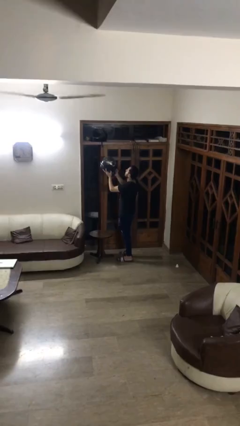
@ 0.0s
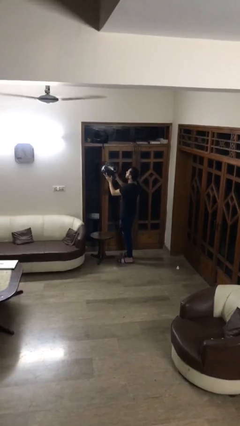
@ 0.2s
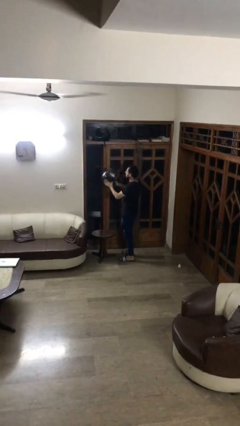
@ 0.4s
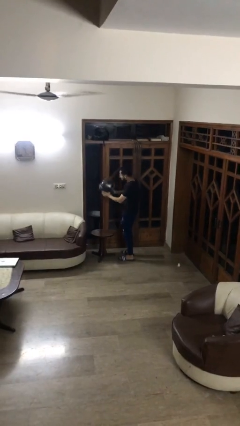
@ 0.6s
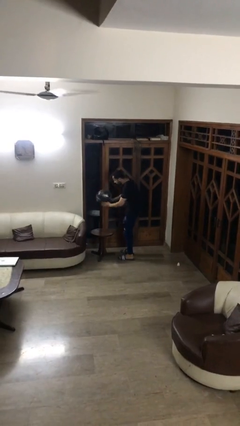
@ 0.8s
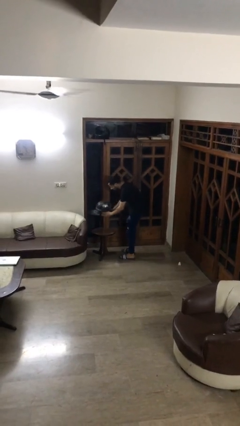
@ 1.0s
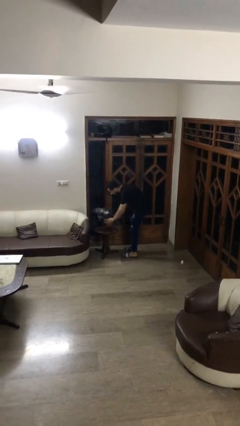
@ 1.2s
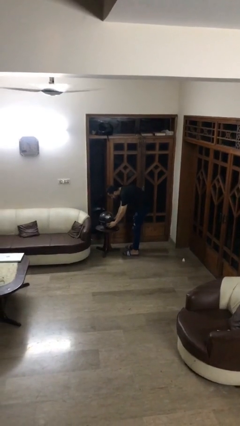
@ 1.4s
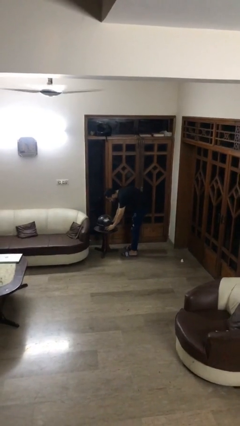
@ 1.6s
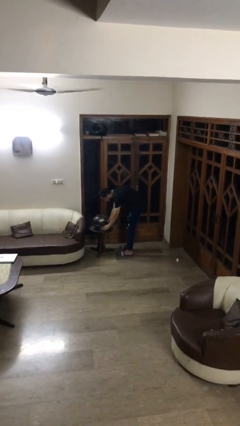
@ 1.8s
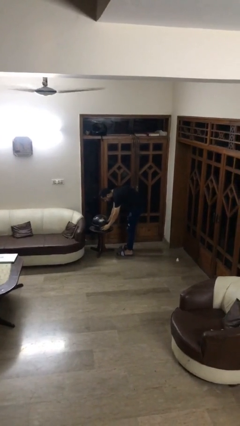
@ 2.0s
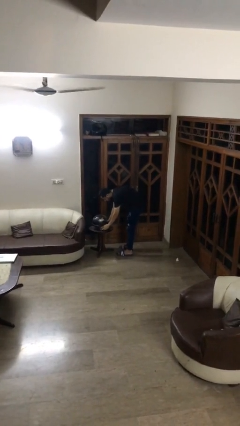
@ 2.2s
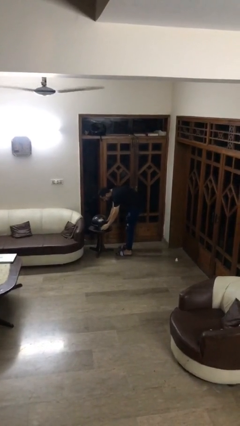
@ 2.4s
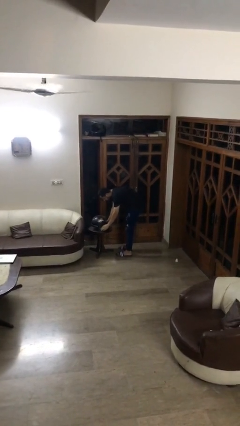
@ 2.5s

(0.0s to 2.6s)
person puts down object on table

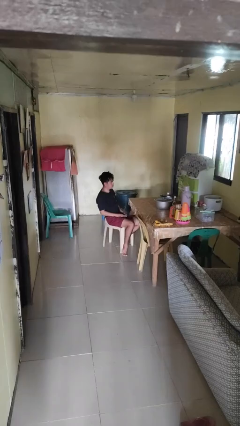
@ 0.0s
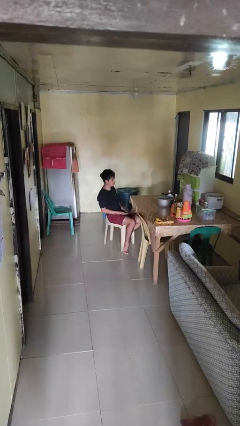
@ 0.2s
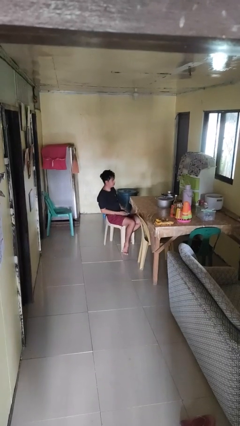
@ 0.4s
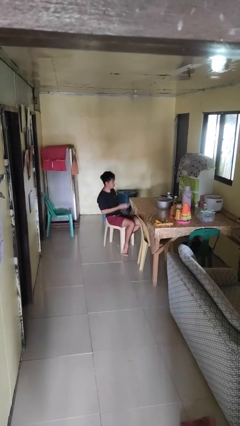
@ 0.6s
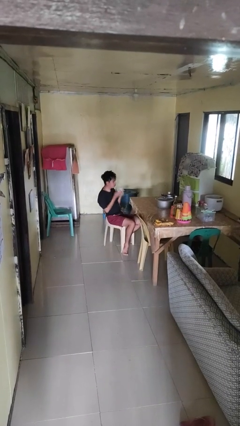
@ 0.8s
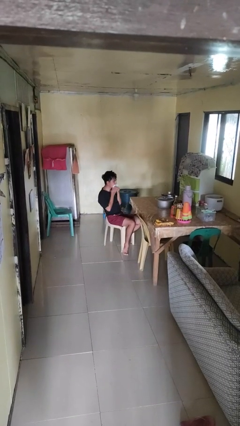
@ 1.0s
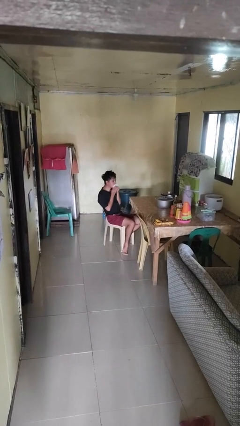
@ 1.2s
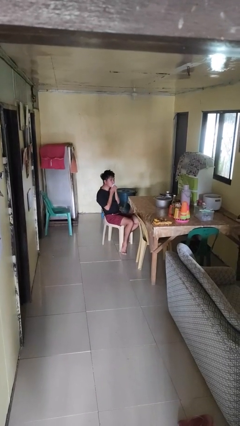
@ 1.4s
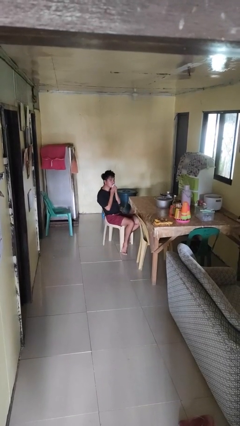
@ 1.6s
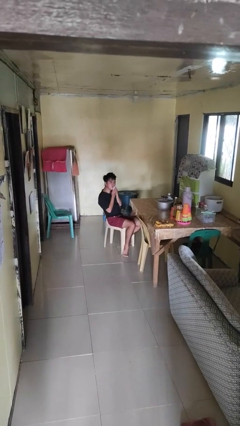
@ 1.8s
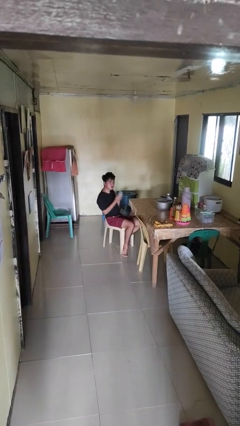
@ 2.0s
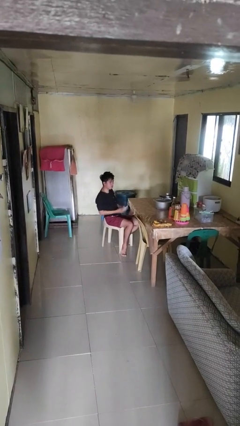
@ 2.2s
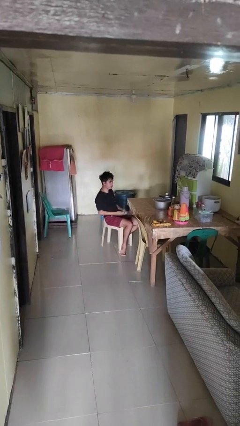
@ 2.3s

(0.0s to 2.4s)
person wipes mouth with napkin

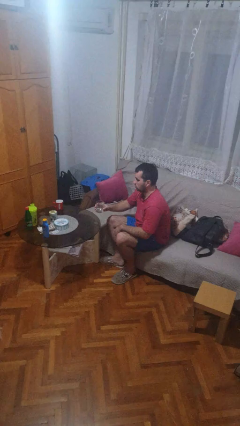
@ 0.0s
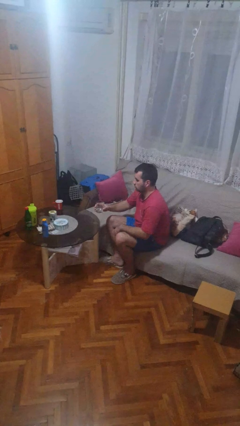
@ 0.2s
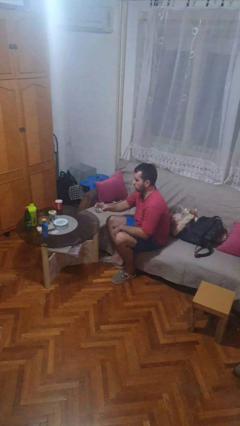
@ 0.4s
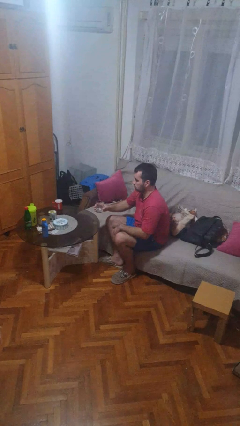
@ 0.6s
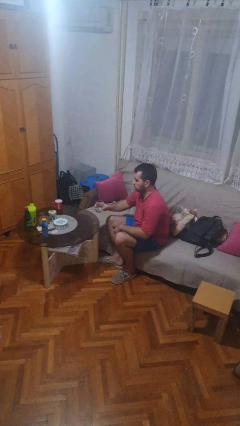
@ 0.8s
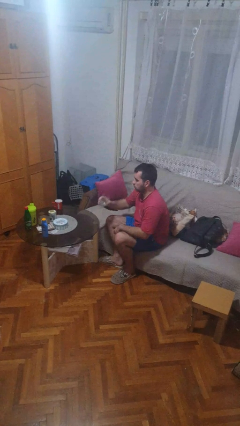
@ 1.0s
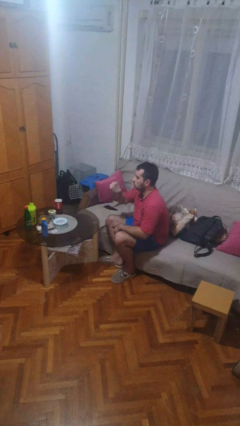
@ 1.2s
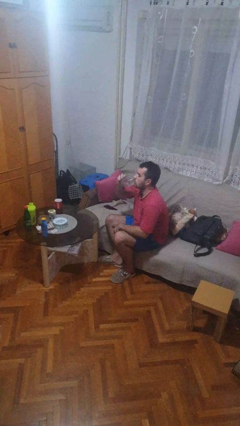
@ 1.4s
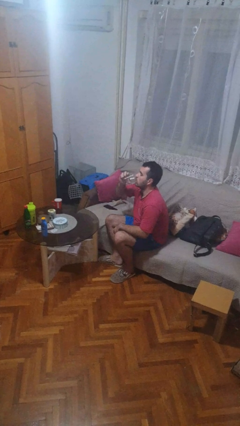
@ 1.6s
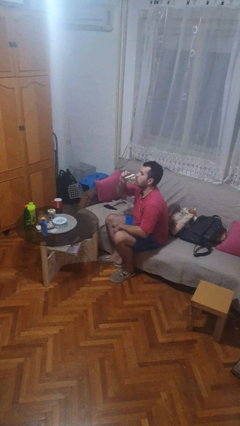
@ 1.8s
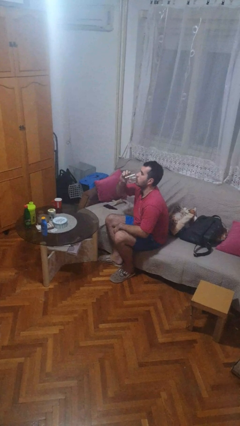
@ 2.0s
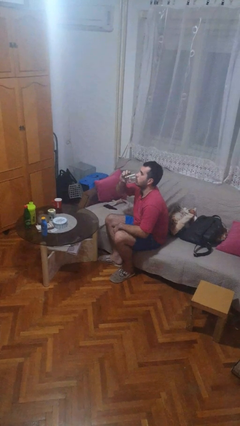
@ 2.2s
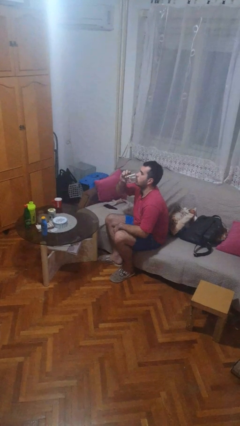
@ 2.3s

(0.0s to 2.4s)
person drinks from shotglass

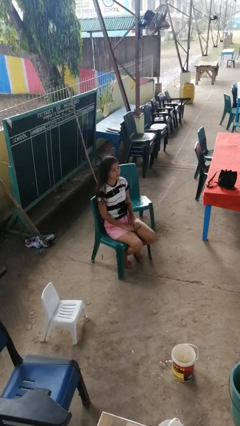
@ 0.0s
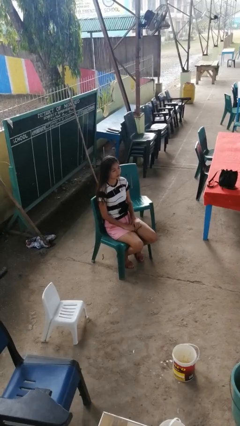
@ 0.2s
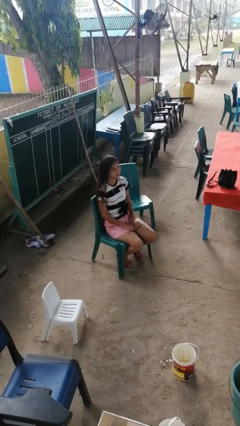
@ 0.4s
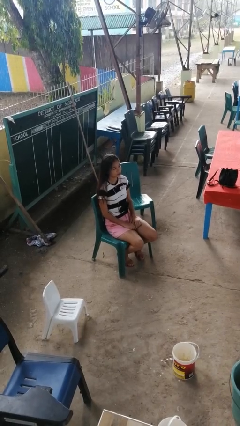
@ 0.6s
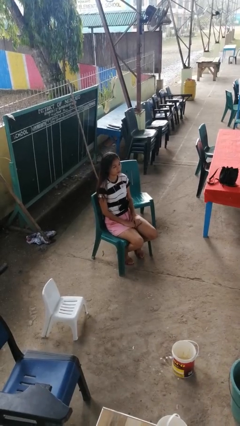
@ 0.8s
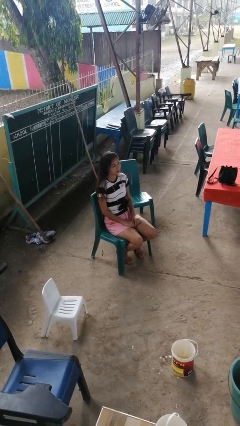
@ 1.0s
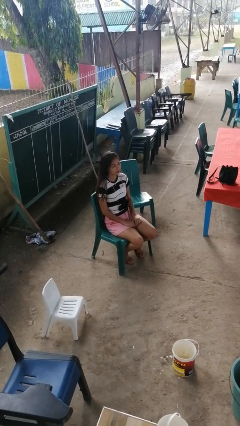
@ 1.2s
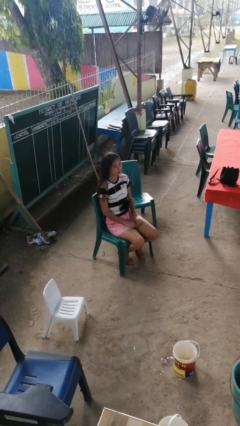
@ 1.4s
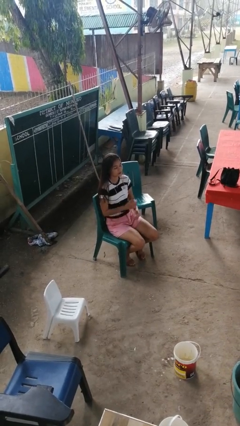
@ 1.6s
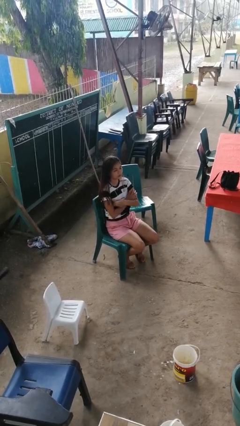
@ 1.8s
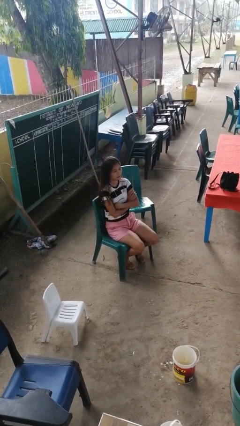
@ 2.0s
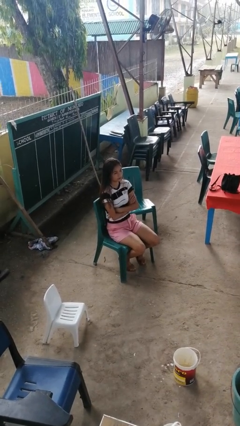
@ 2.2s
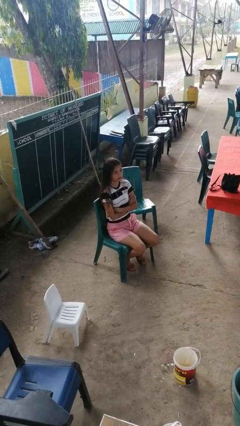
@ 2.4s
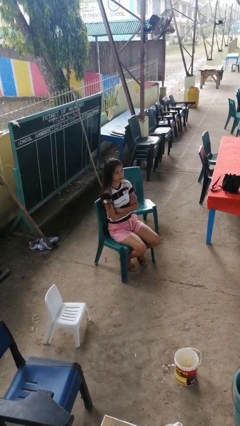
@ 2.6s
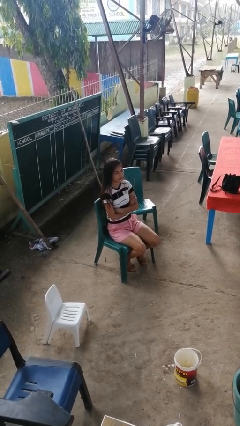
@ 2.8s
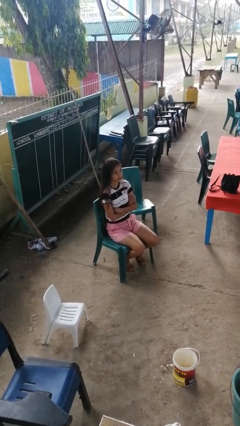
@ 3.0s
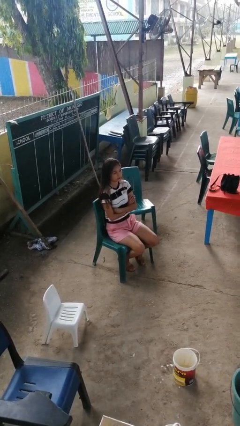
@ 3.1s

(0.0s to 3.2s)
person gestures arms x

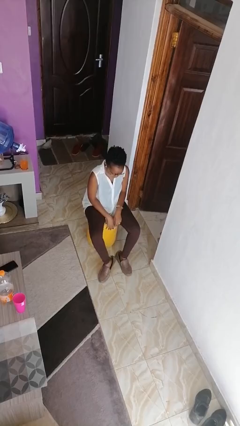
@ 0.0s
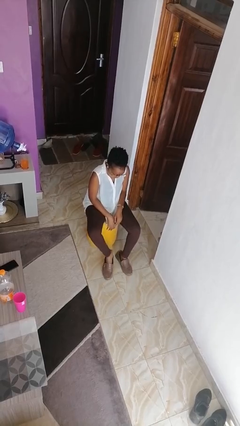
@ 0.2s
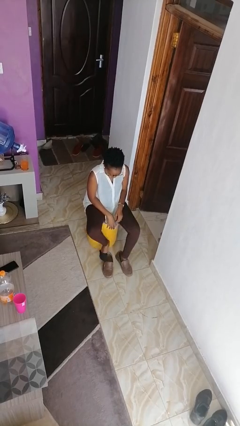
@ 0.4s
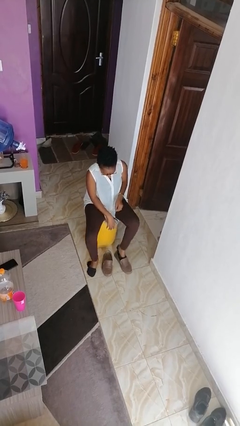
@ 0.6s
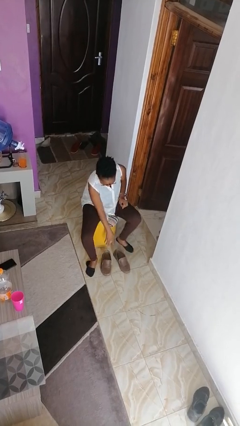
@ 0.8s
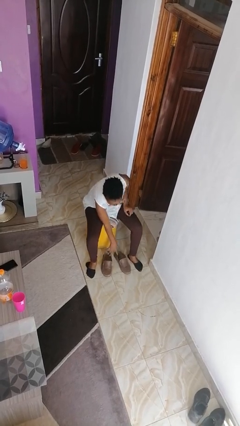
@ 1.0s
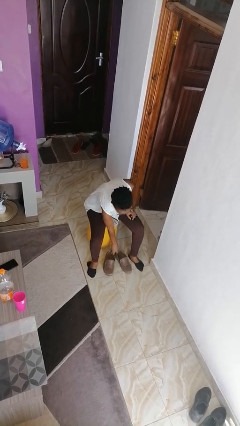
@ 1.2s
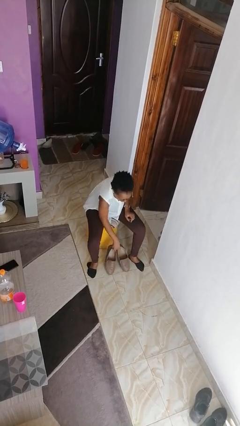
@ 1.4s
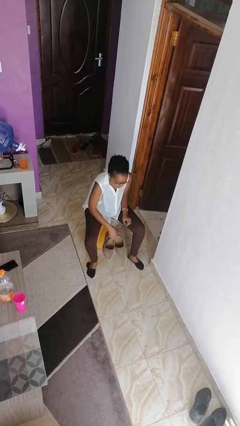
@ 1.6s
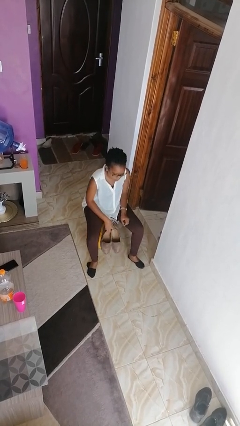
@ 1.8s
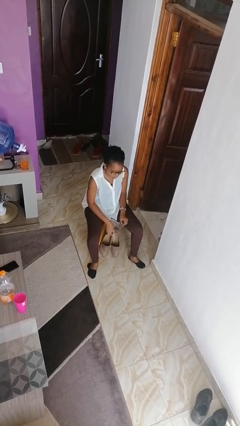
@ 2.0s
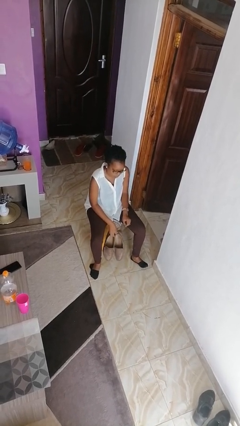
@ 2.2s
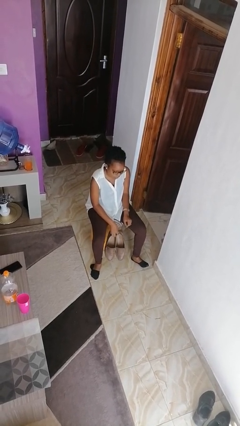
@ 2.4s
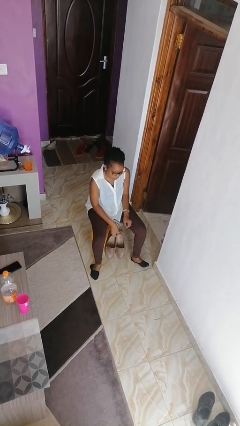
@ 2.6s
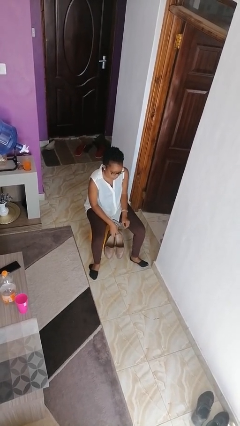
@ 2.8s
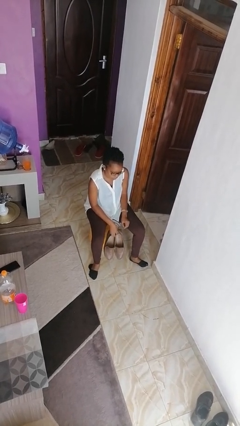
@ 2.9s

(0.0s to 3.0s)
person takes off shoes

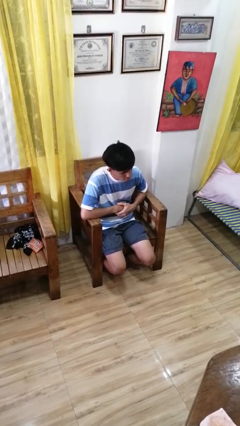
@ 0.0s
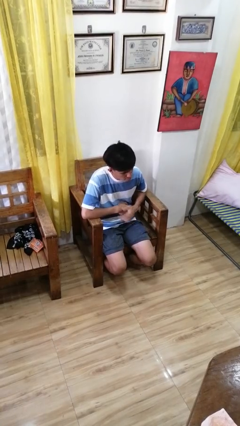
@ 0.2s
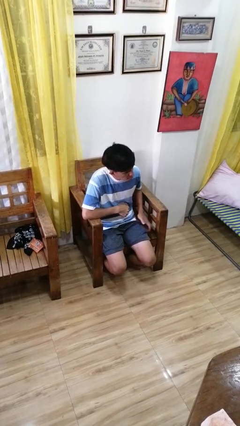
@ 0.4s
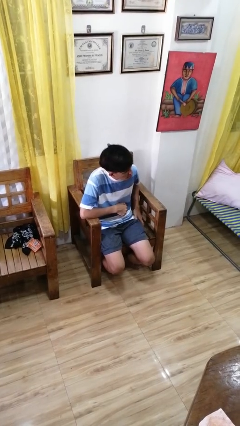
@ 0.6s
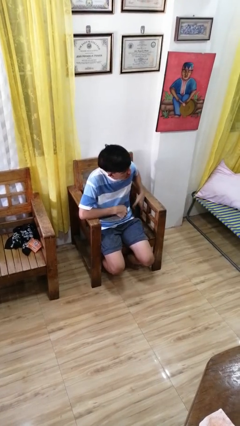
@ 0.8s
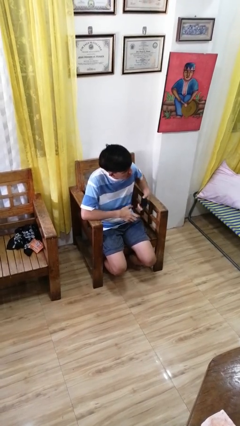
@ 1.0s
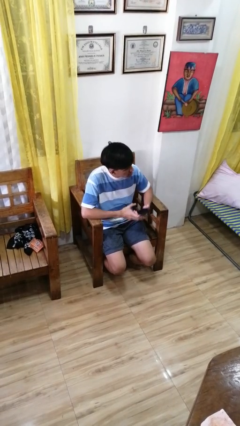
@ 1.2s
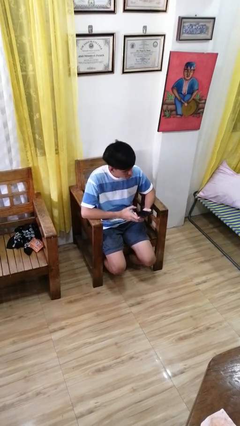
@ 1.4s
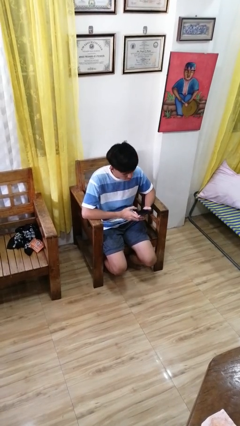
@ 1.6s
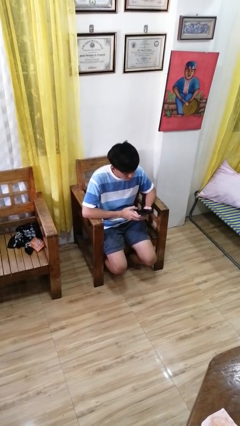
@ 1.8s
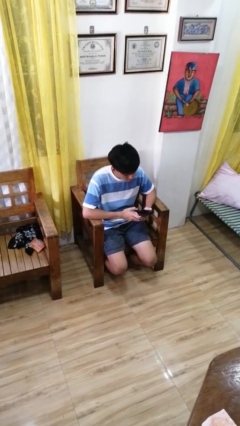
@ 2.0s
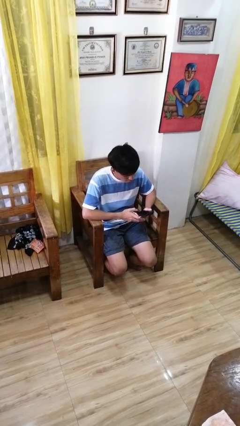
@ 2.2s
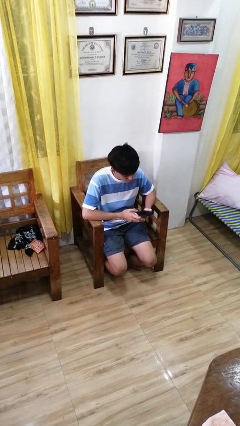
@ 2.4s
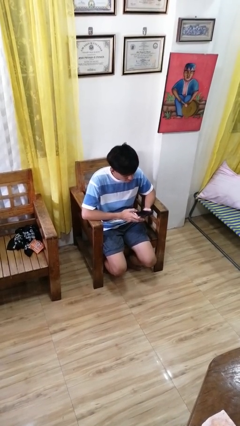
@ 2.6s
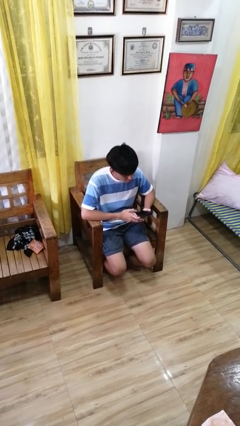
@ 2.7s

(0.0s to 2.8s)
person takes phone from pocket

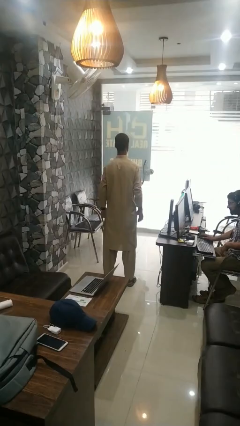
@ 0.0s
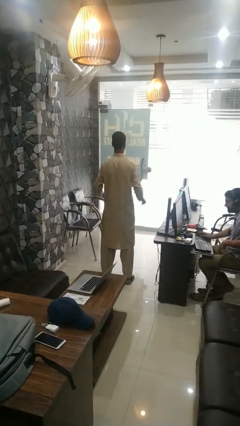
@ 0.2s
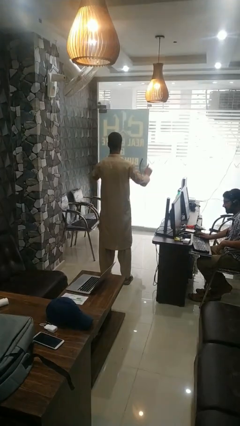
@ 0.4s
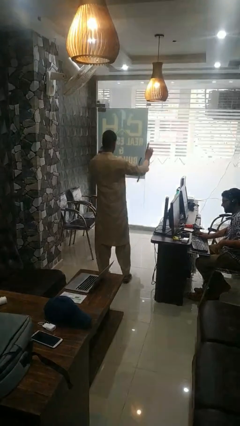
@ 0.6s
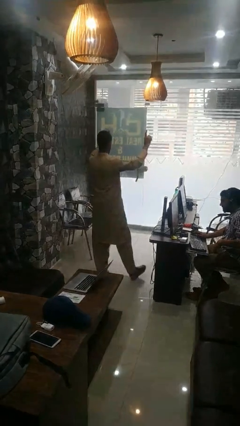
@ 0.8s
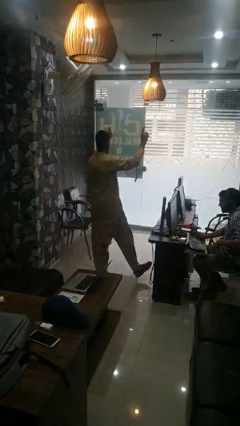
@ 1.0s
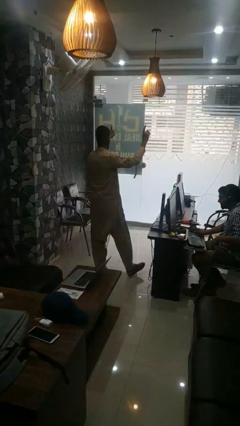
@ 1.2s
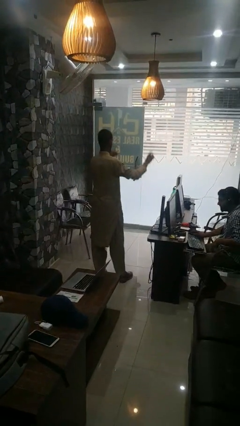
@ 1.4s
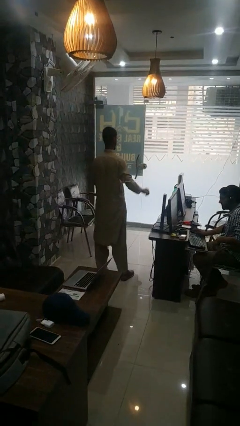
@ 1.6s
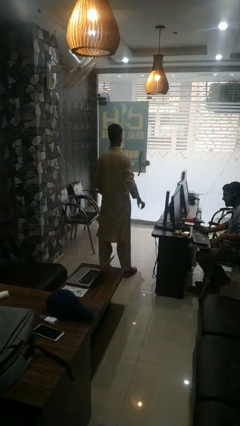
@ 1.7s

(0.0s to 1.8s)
person dances in place
